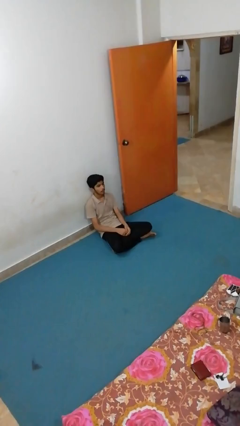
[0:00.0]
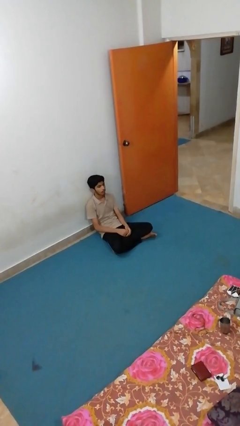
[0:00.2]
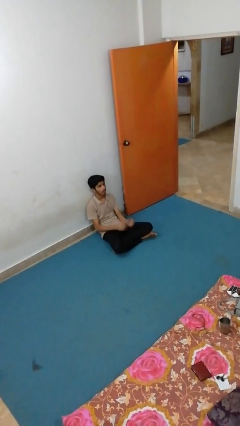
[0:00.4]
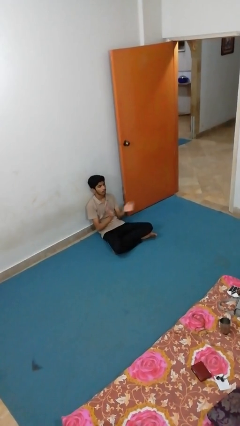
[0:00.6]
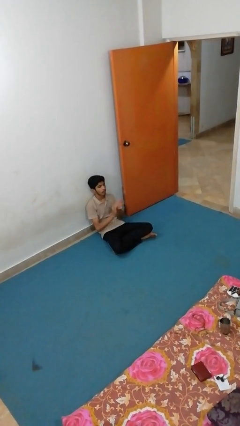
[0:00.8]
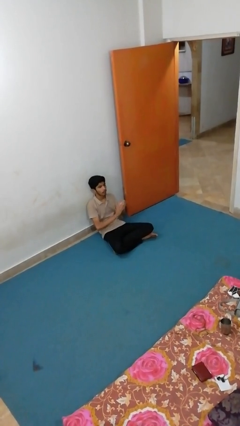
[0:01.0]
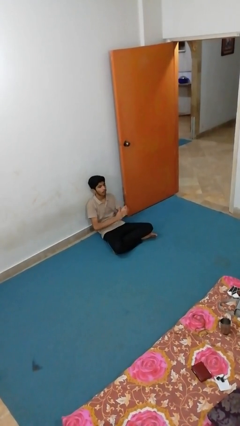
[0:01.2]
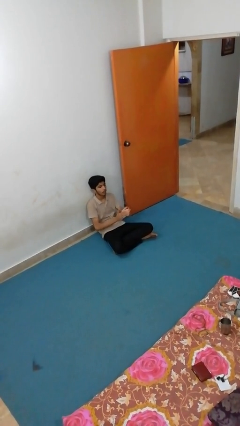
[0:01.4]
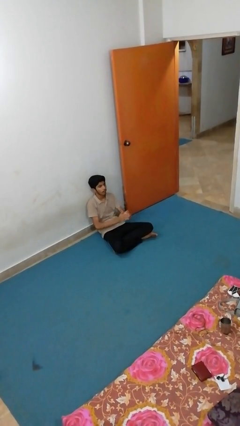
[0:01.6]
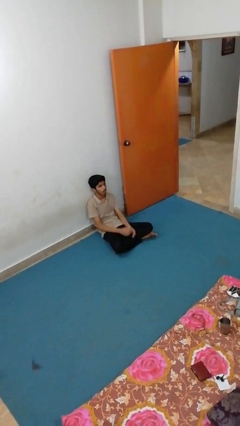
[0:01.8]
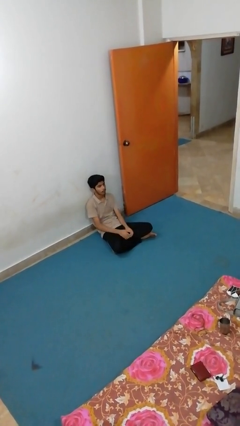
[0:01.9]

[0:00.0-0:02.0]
person claps hands

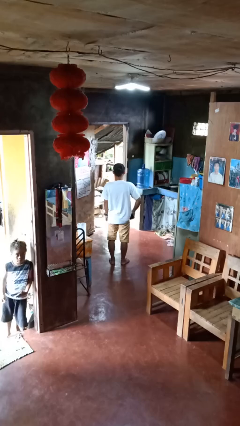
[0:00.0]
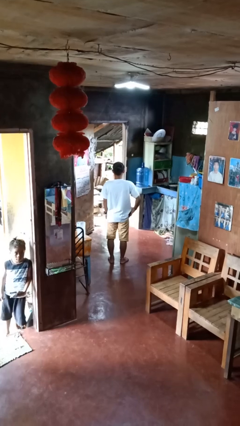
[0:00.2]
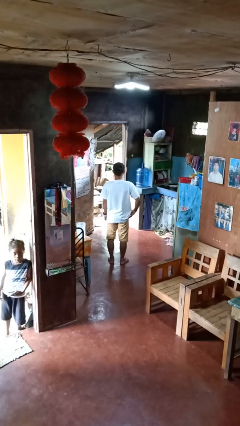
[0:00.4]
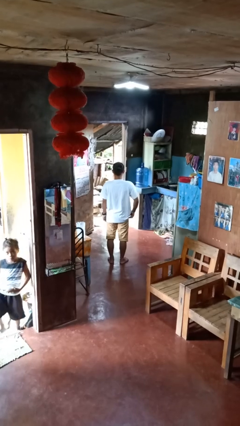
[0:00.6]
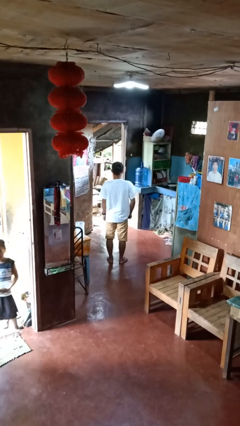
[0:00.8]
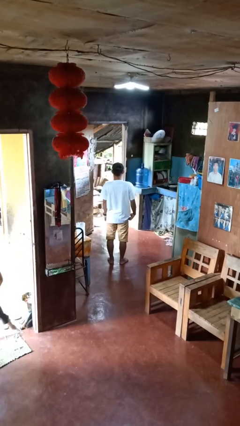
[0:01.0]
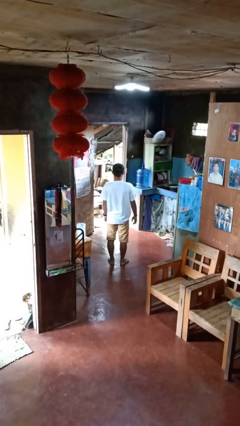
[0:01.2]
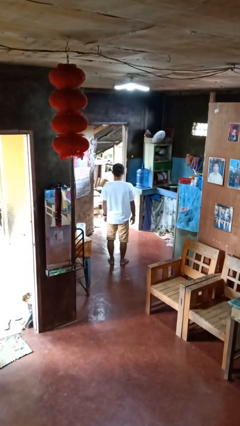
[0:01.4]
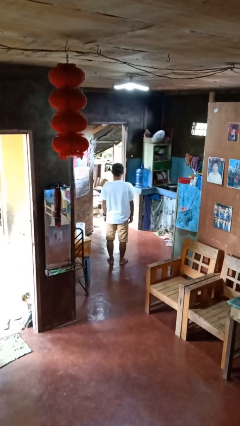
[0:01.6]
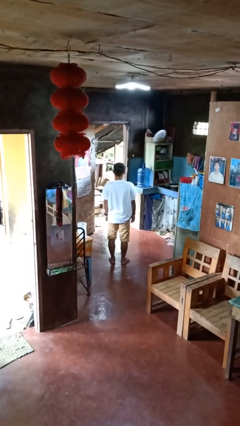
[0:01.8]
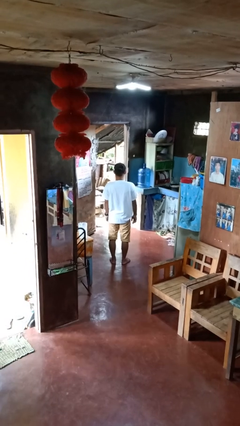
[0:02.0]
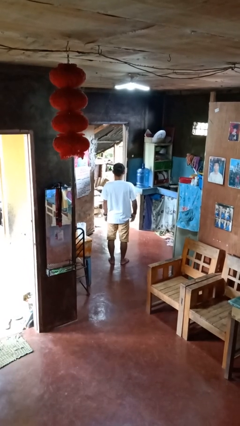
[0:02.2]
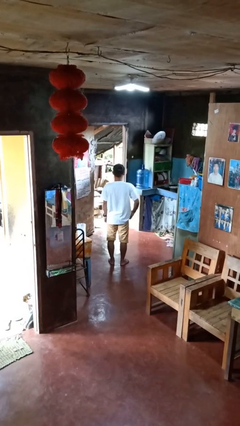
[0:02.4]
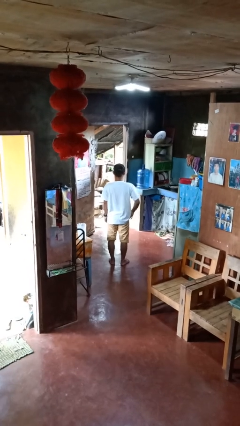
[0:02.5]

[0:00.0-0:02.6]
person puts phone into pocket

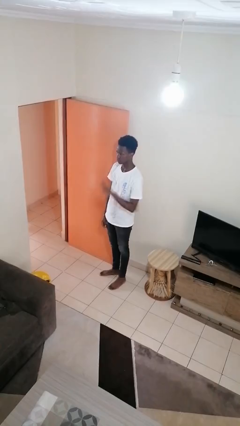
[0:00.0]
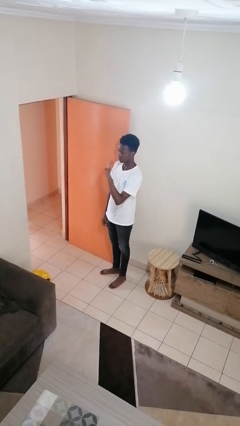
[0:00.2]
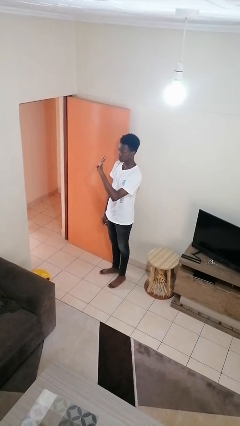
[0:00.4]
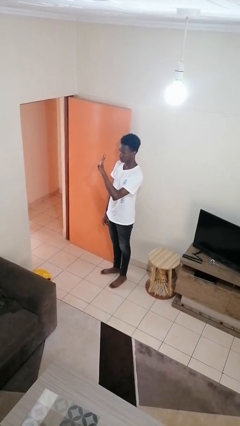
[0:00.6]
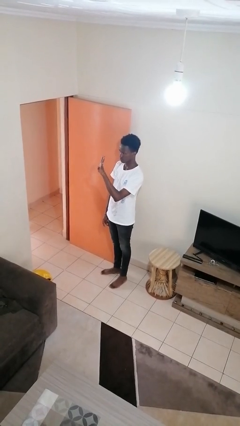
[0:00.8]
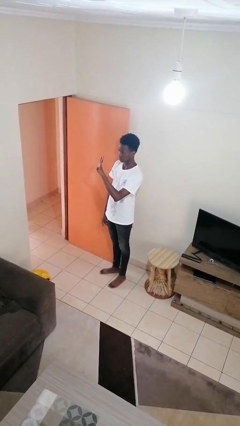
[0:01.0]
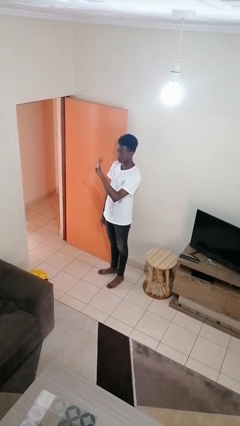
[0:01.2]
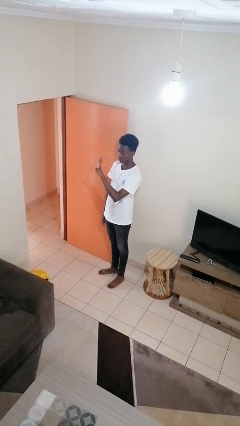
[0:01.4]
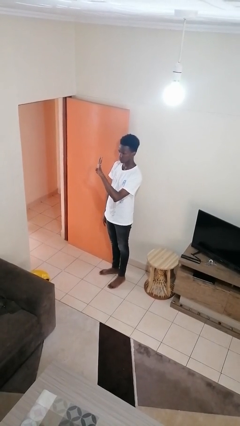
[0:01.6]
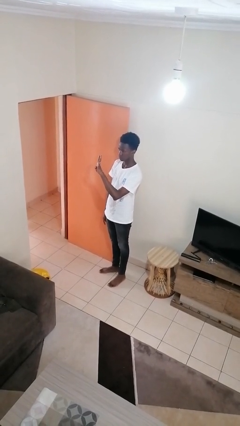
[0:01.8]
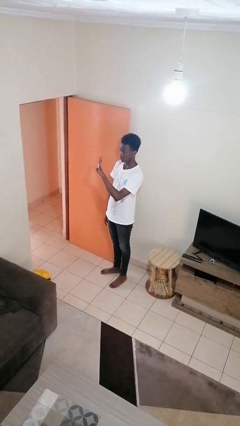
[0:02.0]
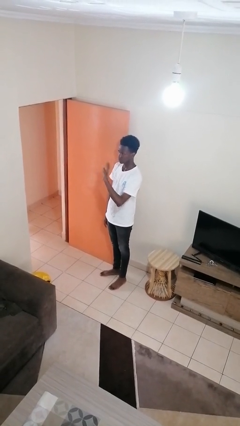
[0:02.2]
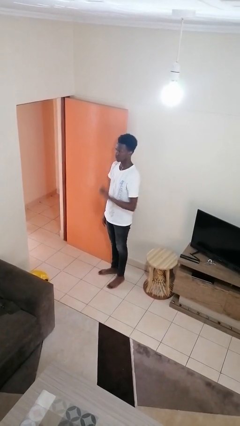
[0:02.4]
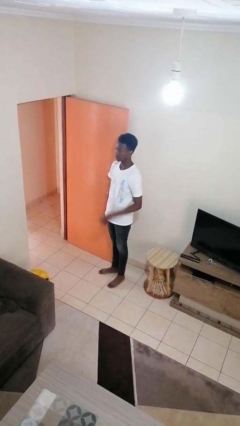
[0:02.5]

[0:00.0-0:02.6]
person gestures number four

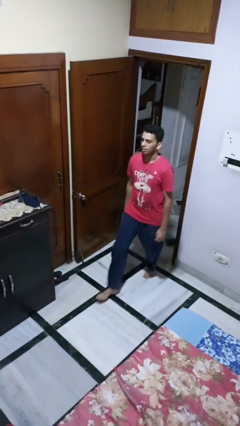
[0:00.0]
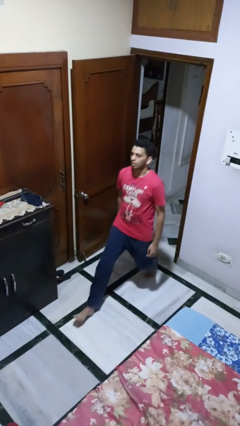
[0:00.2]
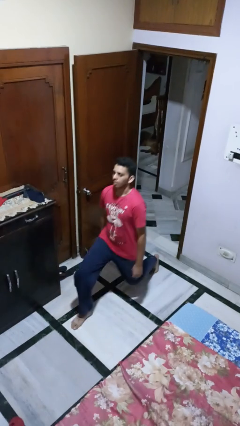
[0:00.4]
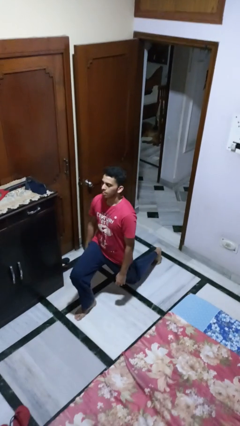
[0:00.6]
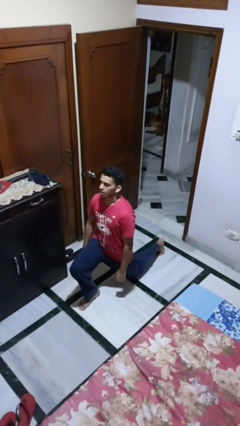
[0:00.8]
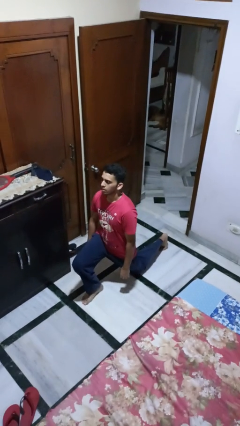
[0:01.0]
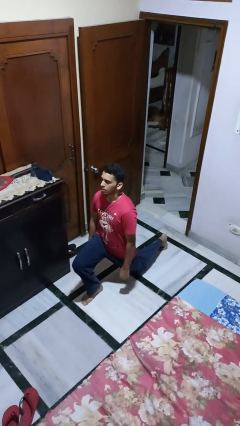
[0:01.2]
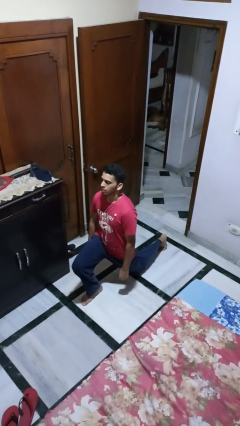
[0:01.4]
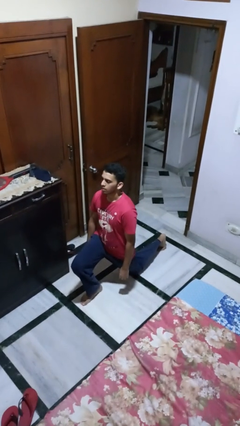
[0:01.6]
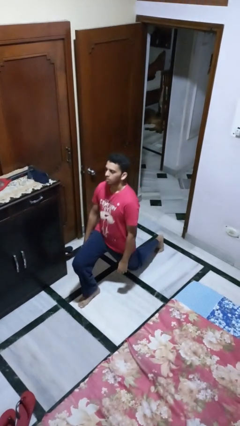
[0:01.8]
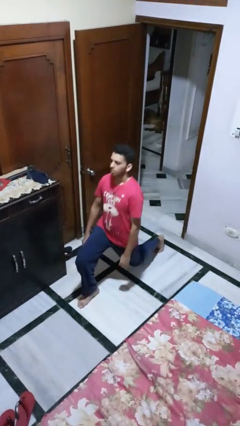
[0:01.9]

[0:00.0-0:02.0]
person exercises with lunges

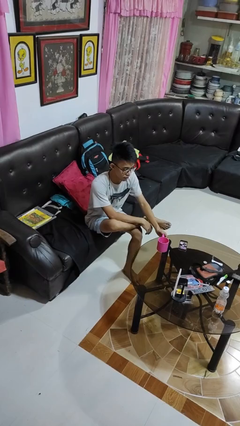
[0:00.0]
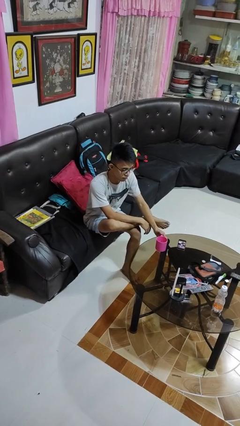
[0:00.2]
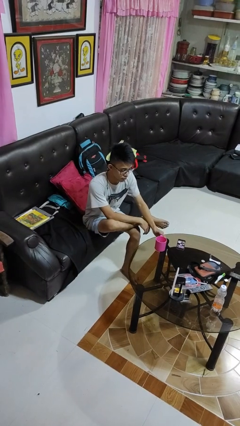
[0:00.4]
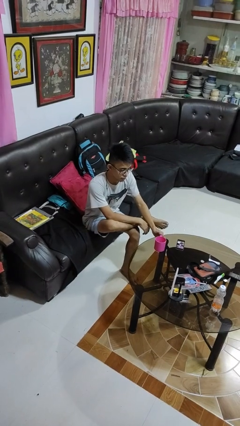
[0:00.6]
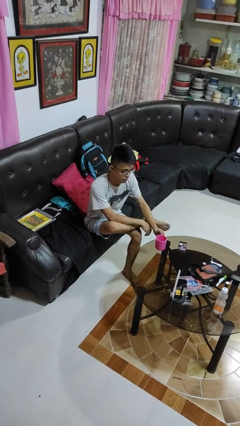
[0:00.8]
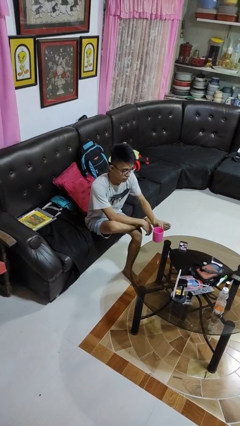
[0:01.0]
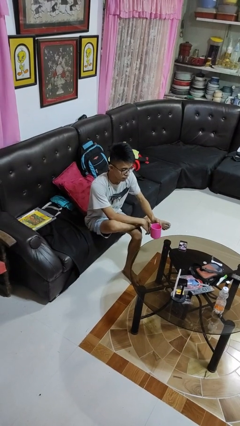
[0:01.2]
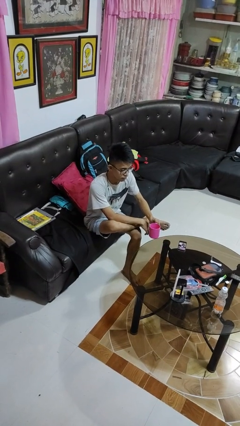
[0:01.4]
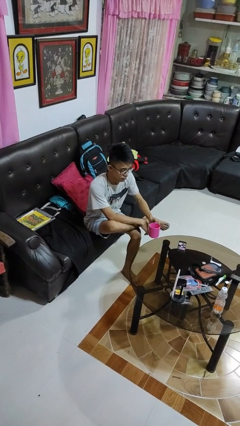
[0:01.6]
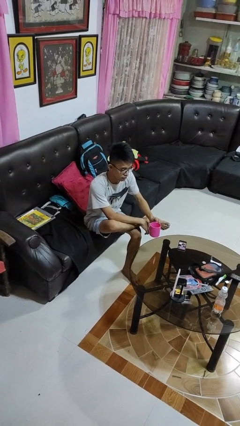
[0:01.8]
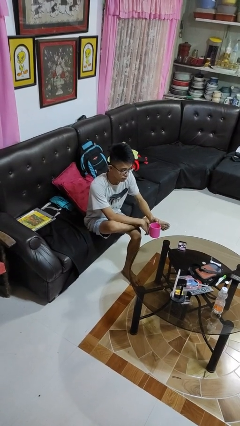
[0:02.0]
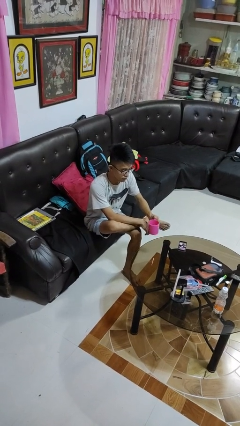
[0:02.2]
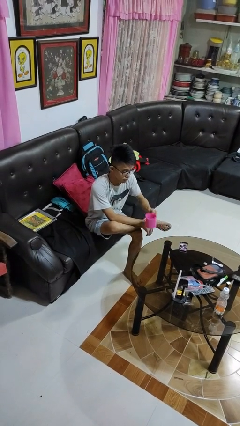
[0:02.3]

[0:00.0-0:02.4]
person picks up object from table

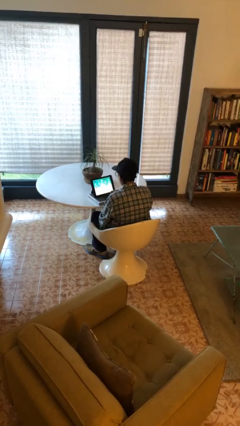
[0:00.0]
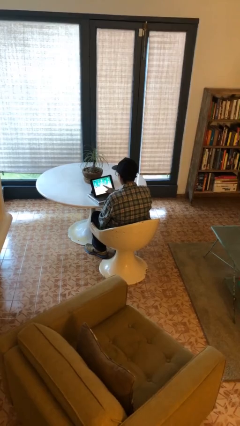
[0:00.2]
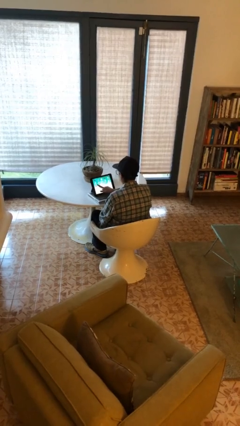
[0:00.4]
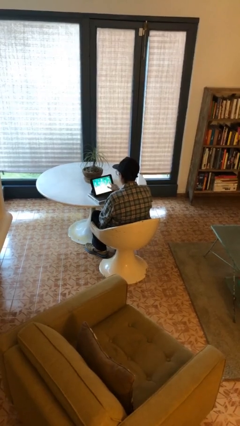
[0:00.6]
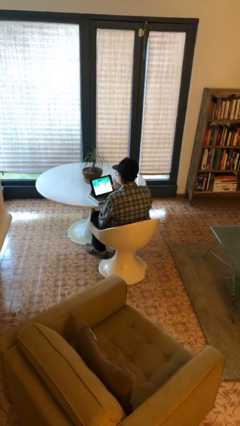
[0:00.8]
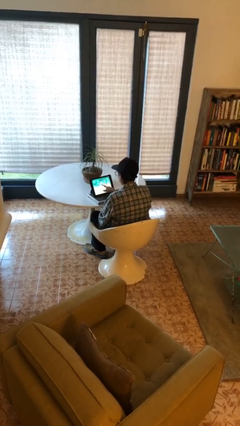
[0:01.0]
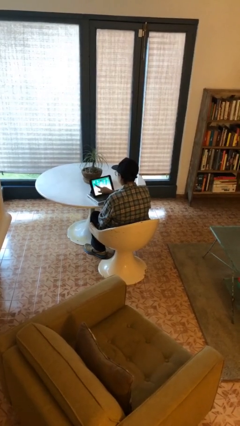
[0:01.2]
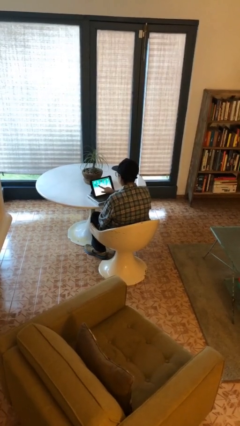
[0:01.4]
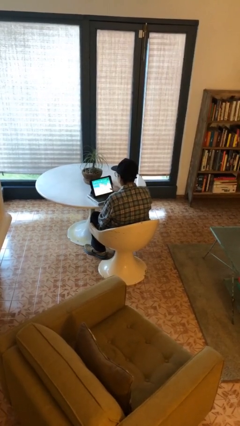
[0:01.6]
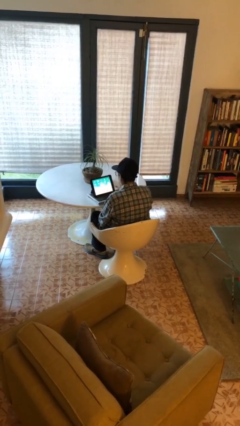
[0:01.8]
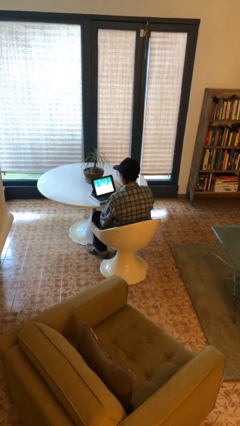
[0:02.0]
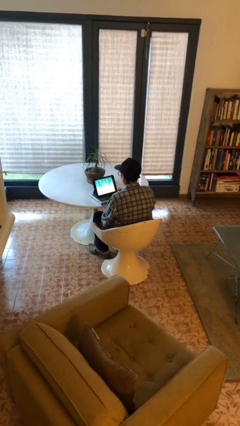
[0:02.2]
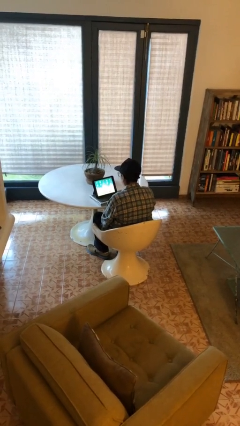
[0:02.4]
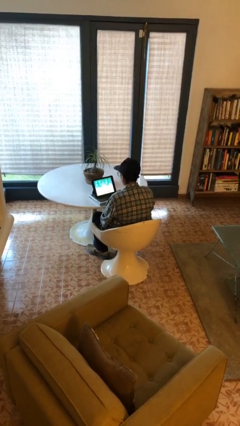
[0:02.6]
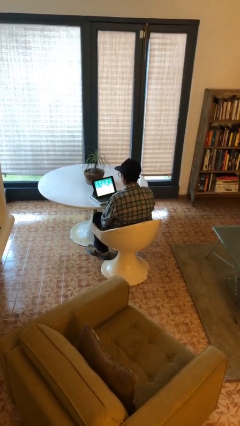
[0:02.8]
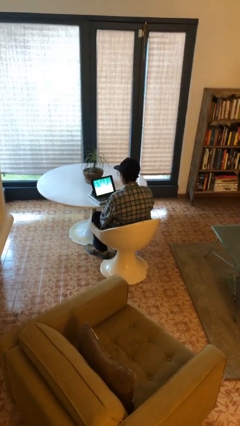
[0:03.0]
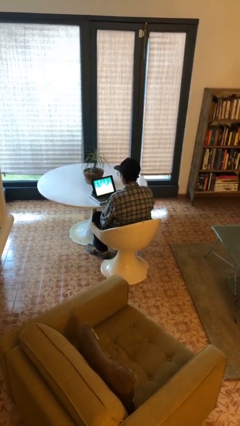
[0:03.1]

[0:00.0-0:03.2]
person interacts with tablet

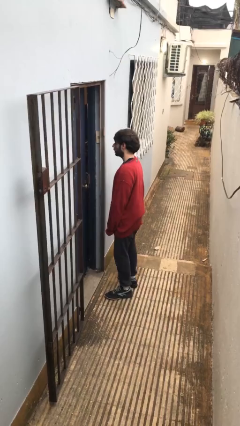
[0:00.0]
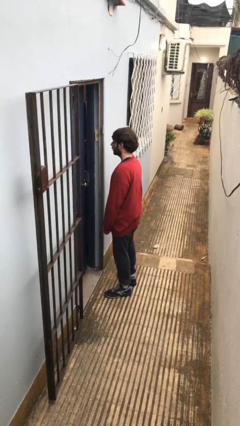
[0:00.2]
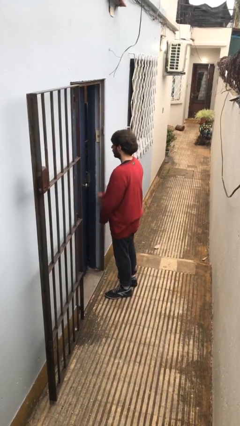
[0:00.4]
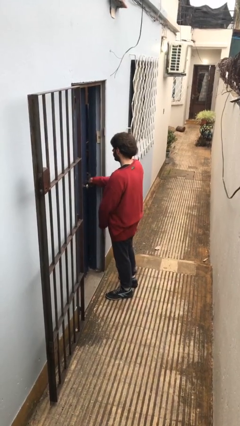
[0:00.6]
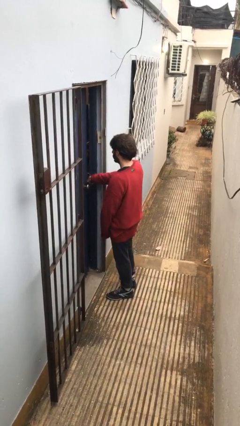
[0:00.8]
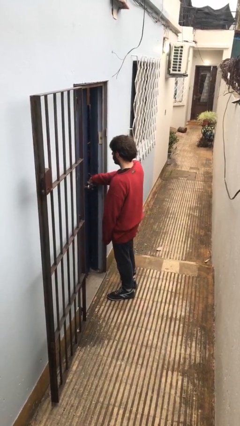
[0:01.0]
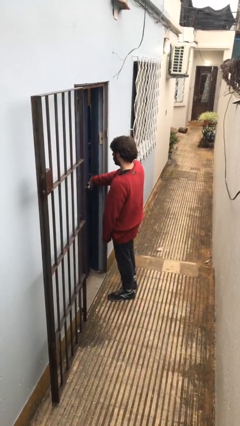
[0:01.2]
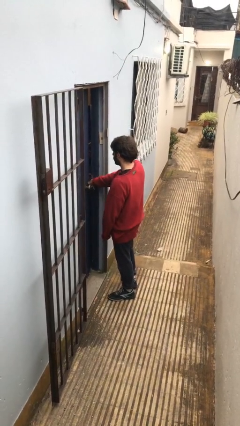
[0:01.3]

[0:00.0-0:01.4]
person unlocks door with keys

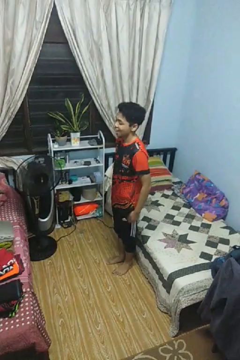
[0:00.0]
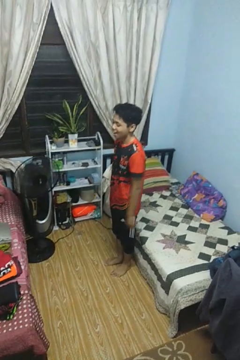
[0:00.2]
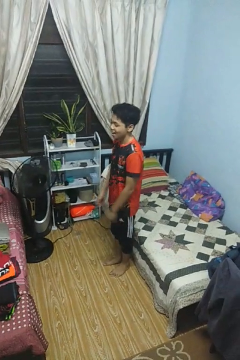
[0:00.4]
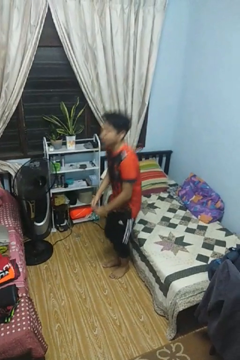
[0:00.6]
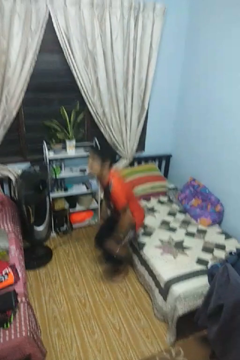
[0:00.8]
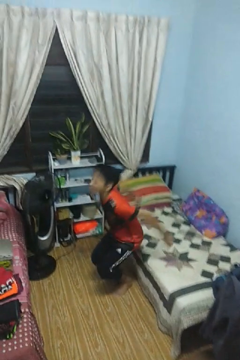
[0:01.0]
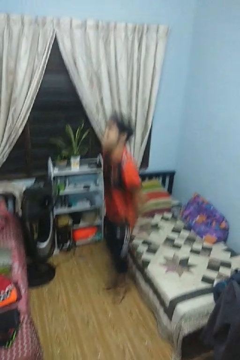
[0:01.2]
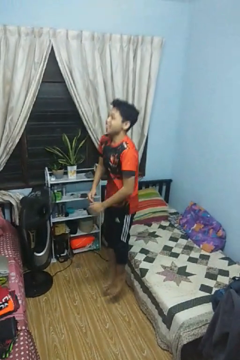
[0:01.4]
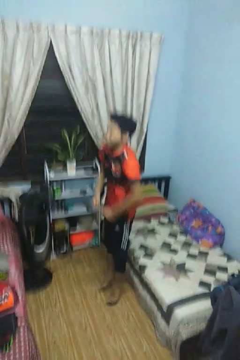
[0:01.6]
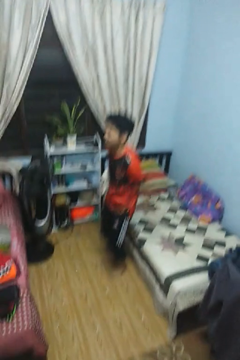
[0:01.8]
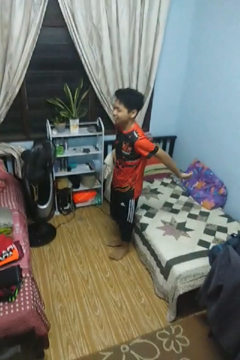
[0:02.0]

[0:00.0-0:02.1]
person jumps
